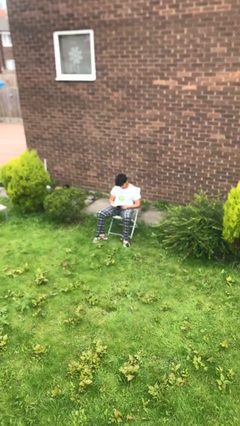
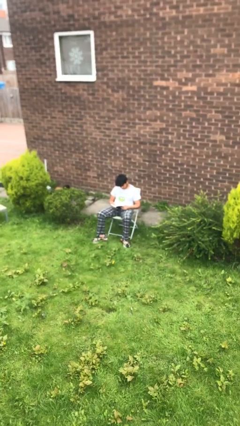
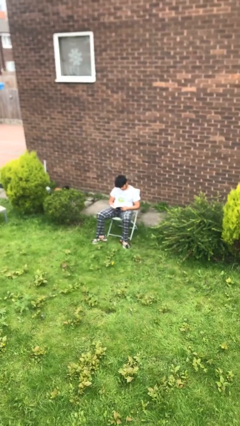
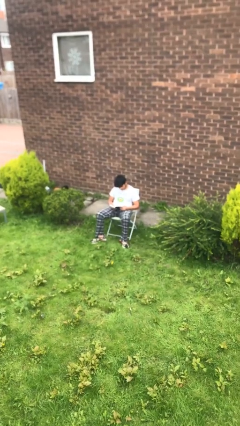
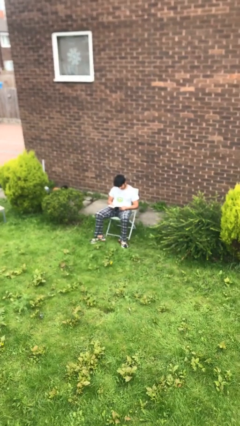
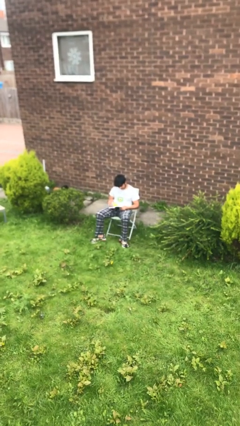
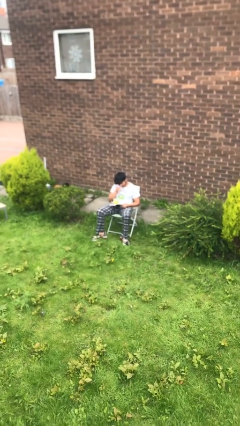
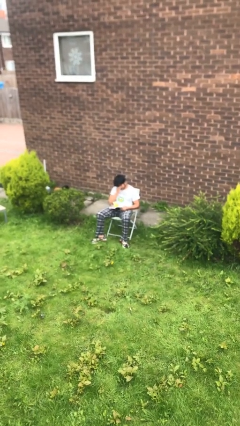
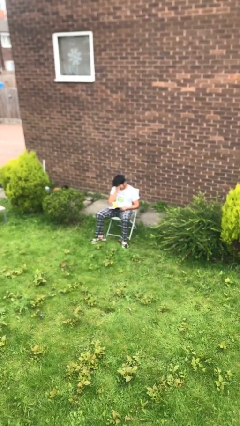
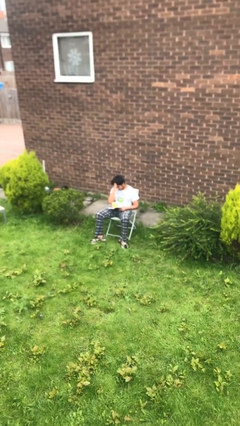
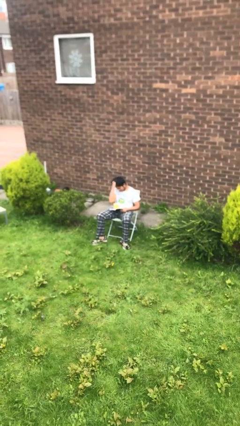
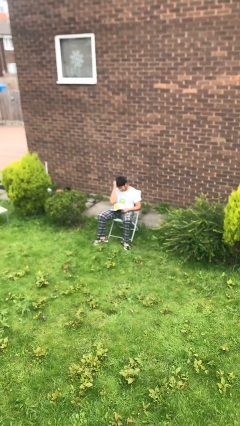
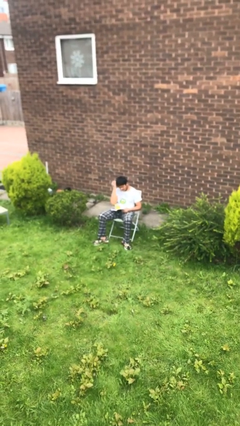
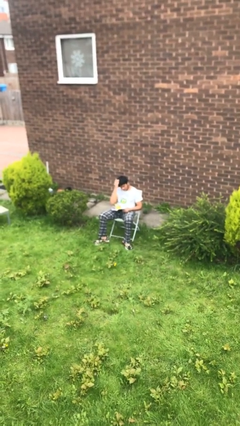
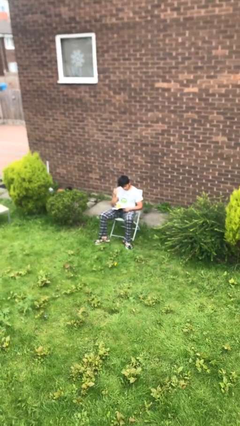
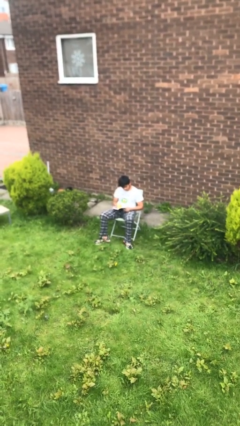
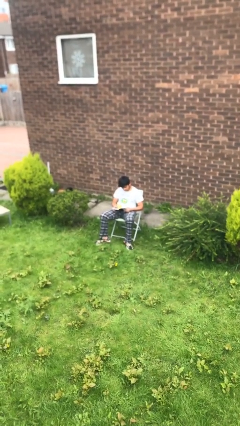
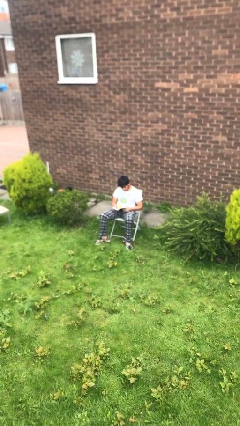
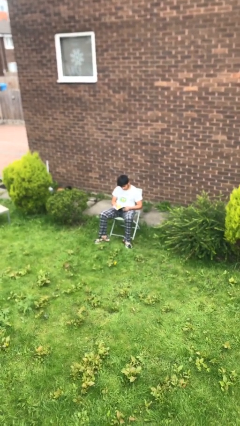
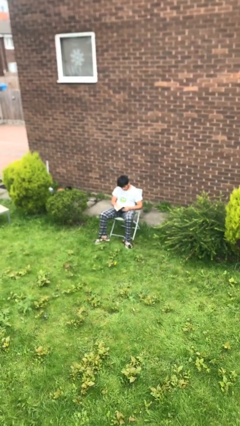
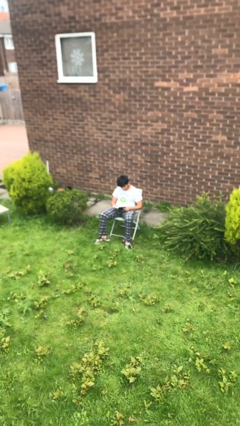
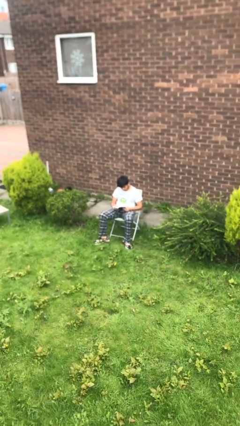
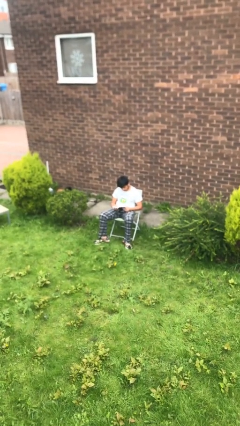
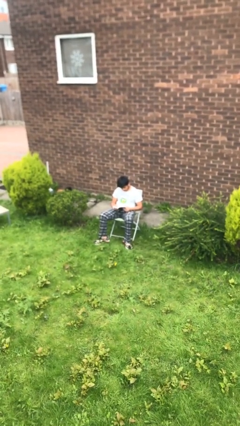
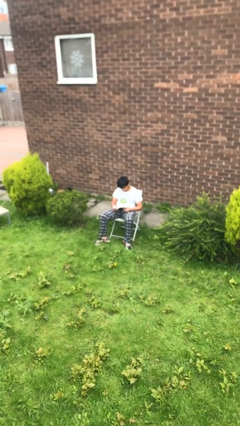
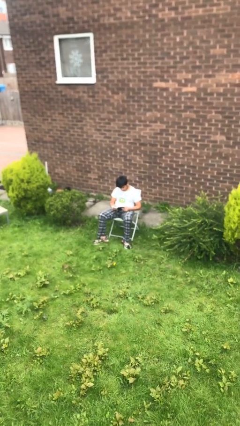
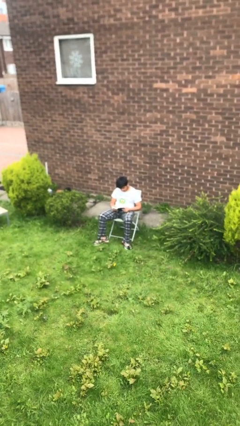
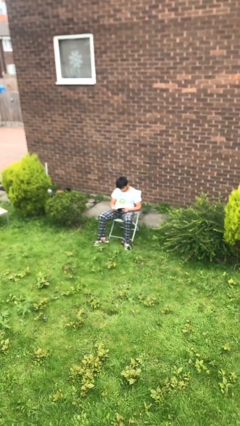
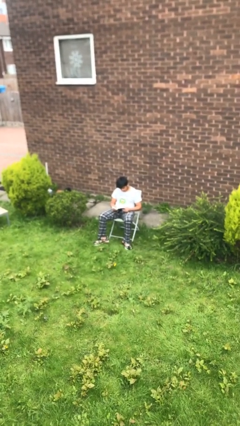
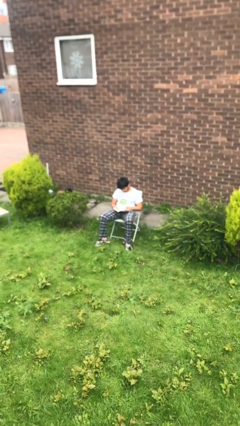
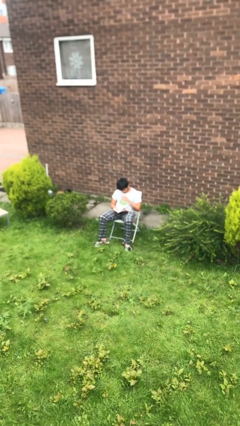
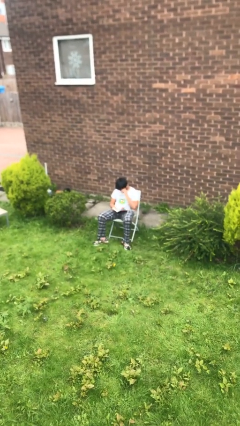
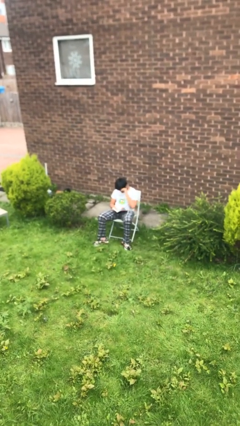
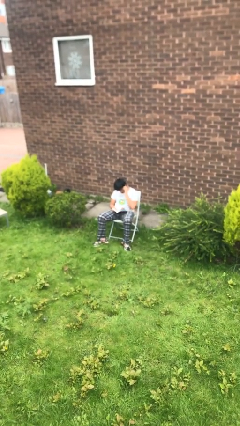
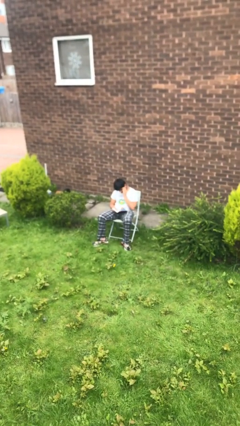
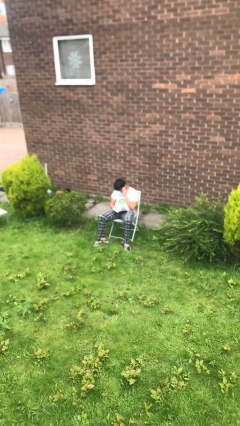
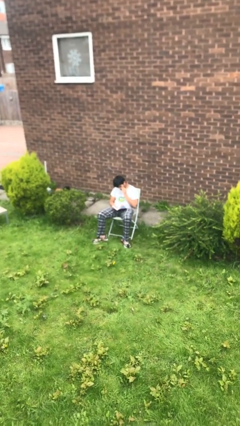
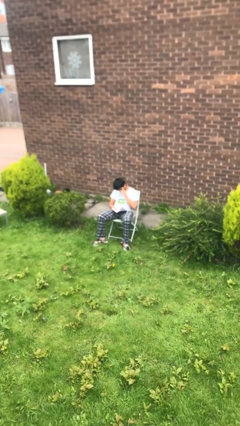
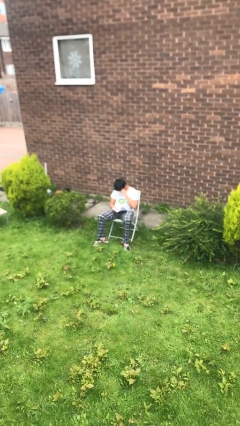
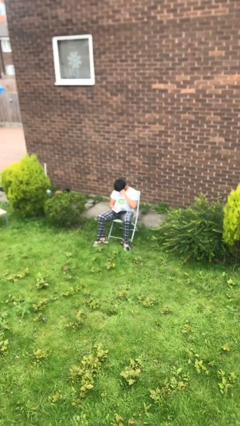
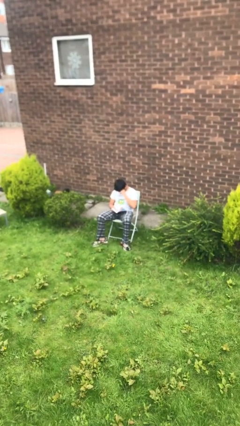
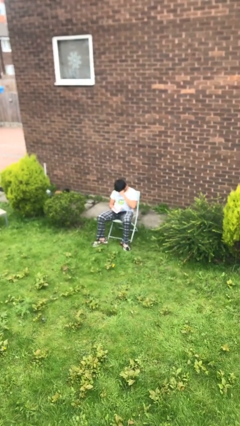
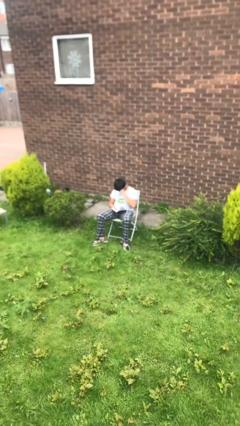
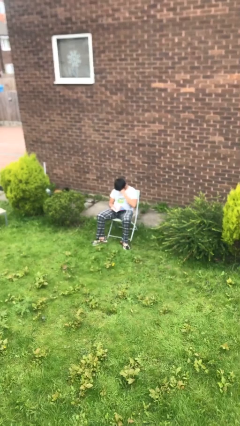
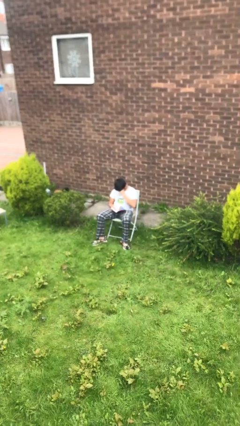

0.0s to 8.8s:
person reads document

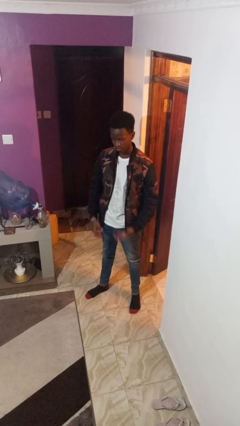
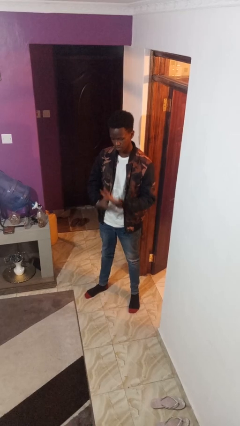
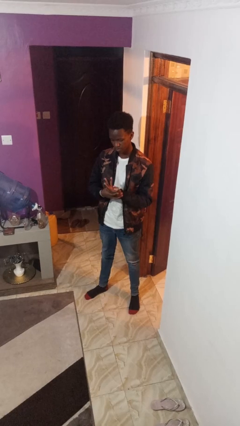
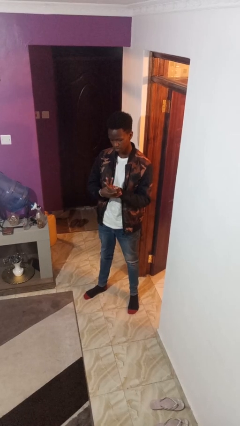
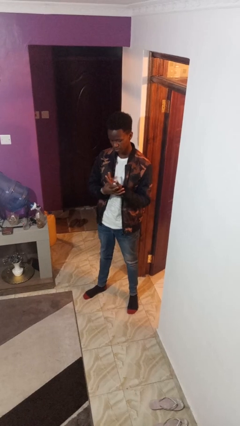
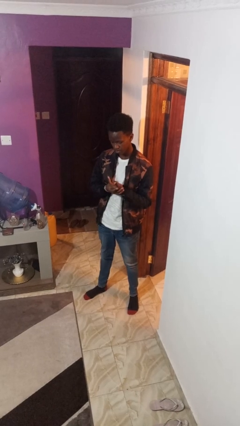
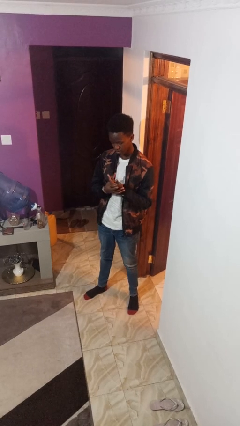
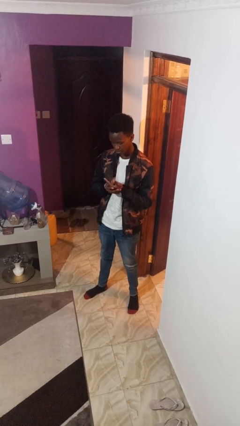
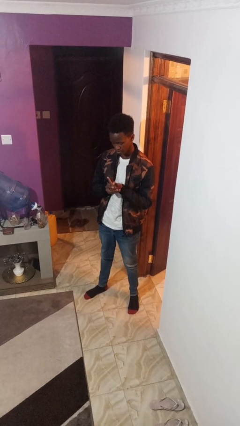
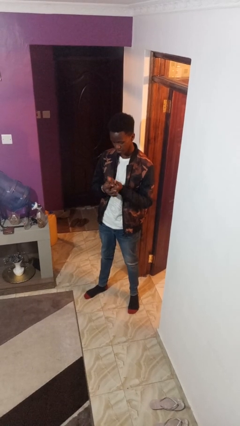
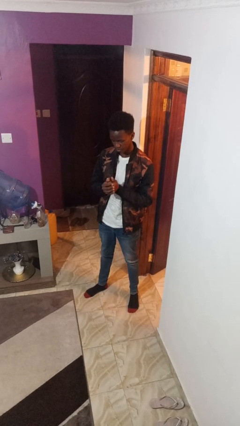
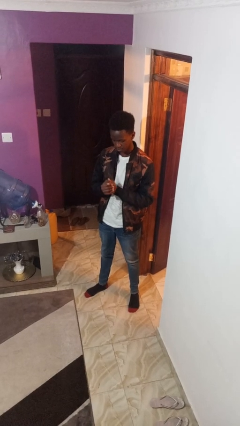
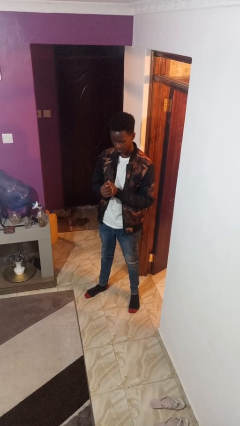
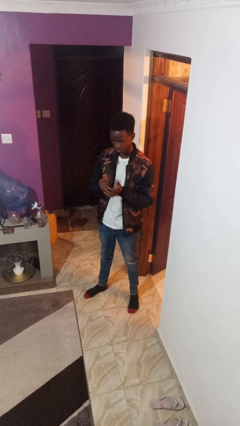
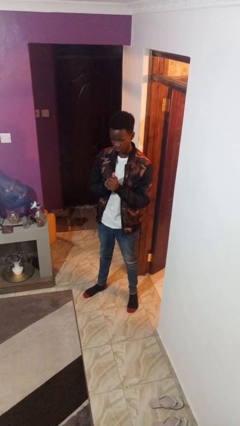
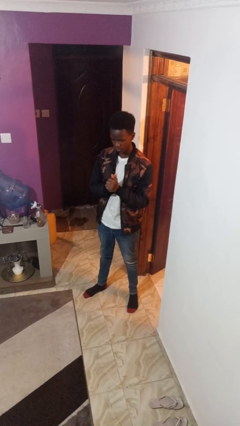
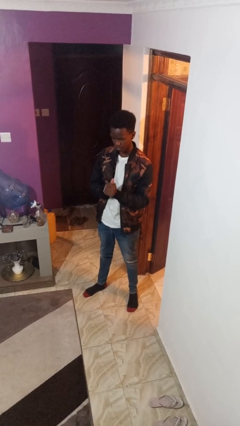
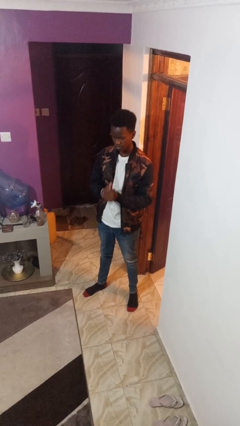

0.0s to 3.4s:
person cracks knuckles

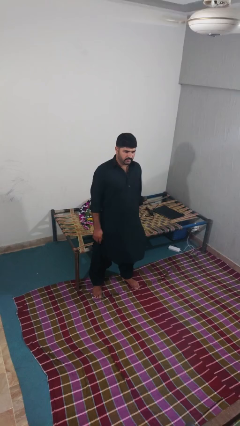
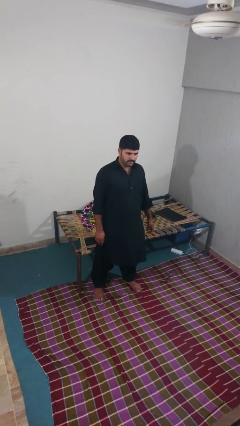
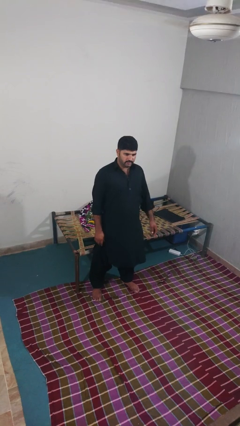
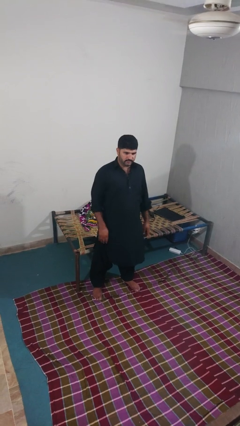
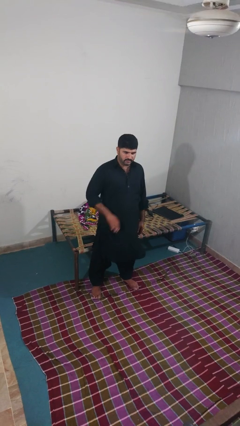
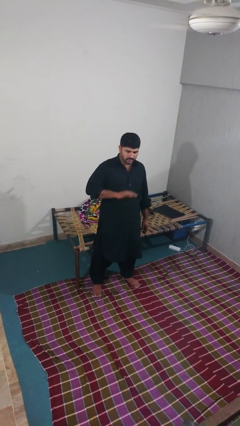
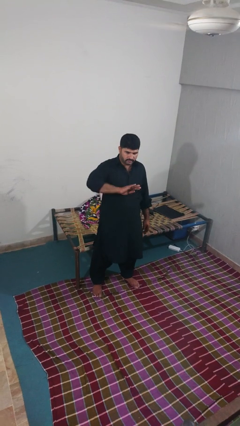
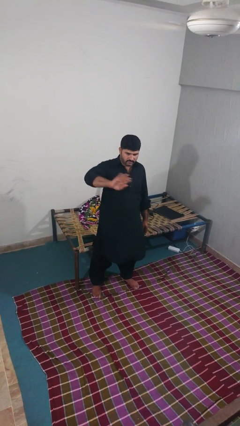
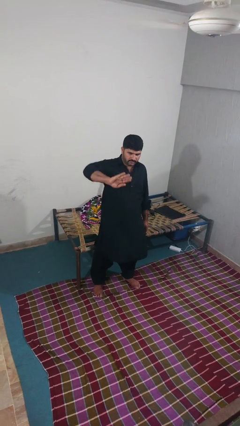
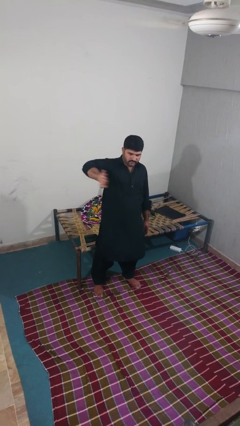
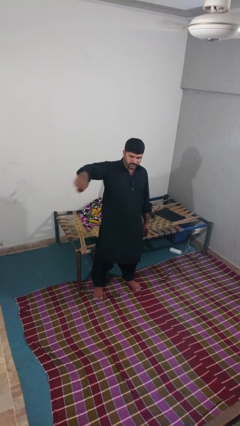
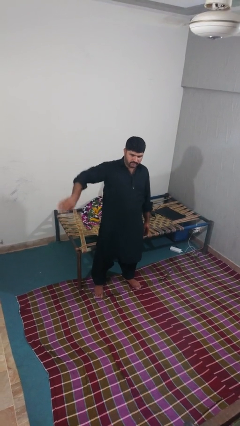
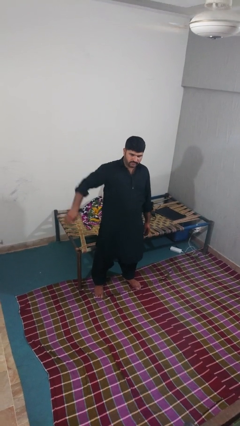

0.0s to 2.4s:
person gestures swipe right

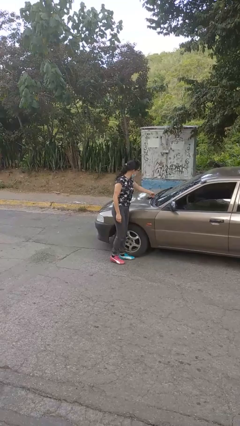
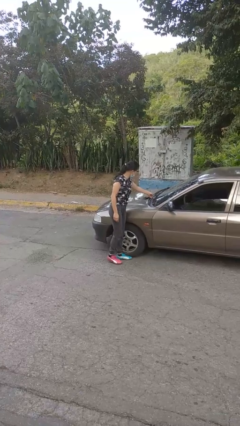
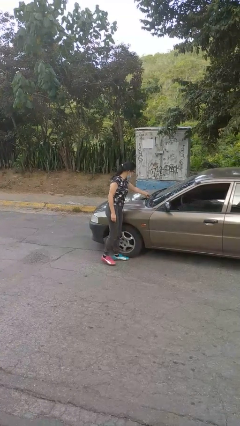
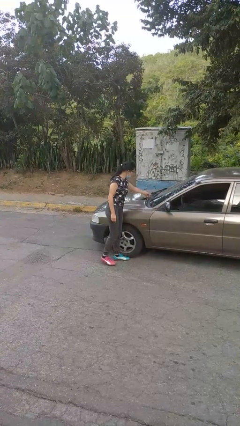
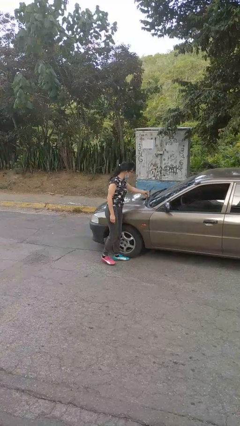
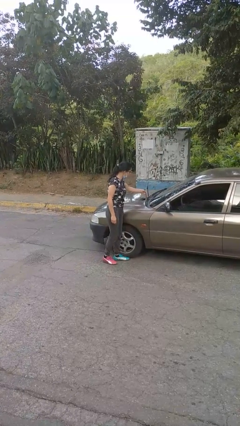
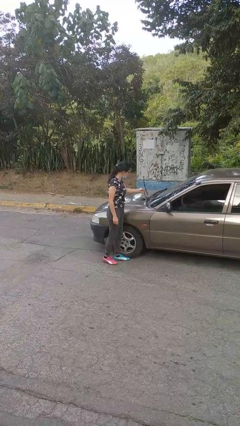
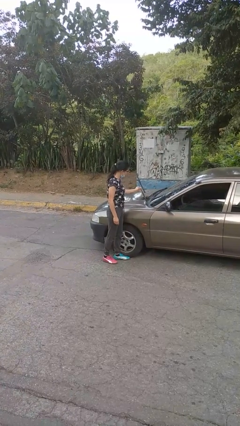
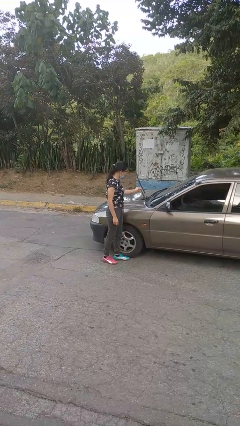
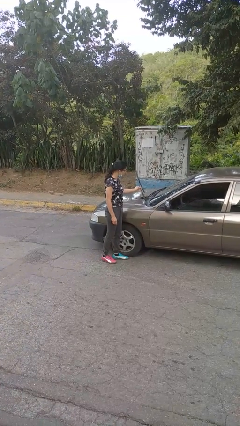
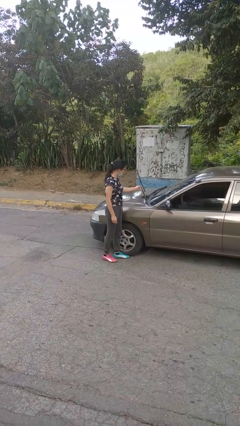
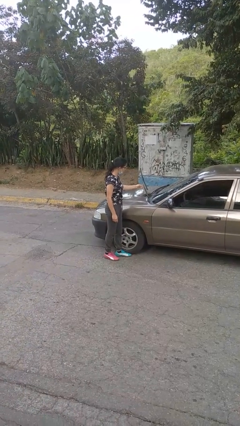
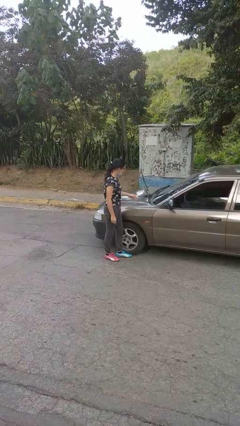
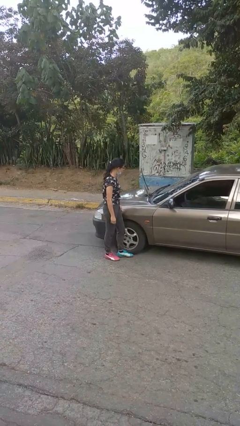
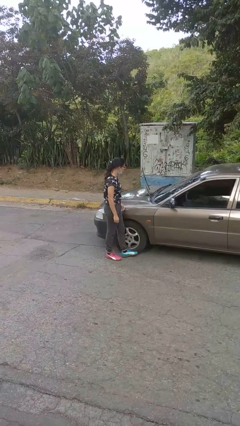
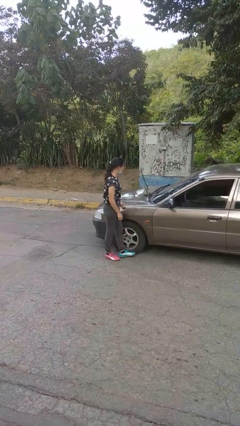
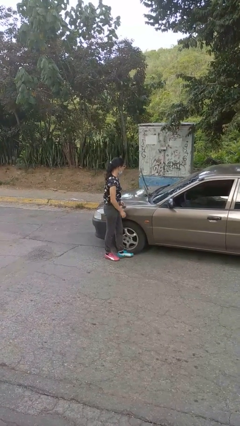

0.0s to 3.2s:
person flips up car wipers
